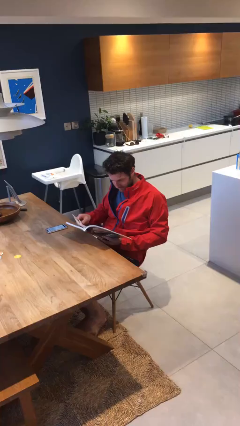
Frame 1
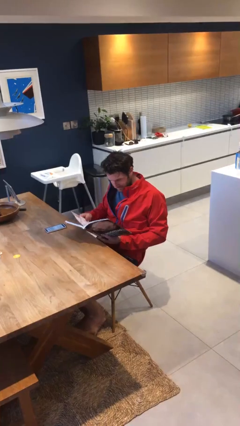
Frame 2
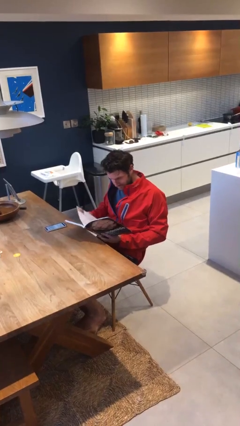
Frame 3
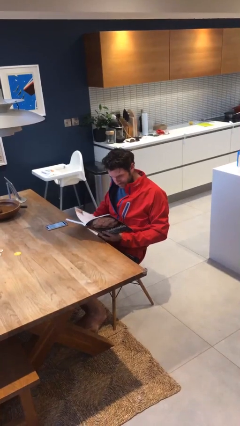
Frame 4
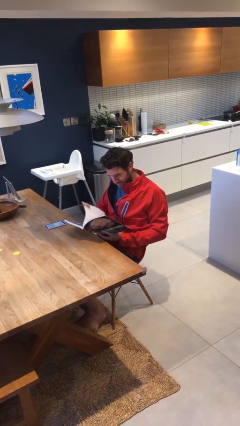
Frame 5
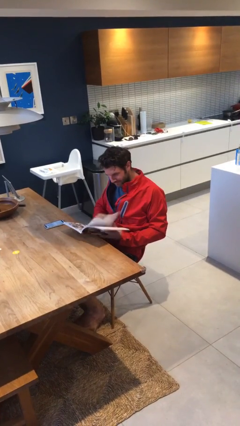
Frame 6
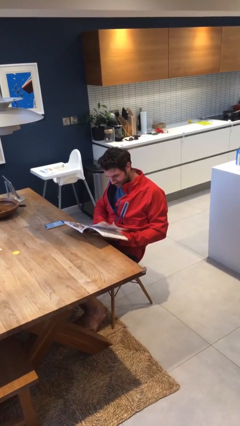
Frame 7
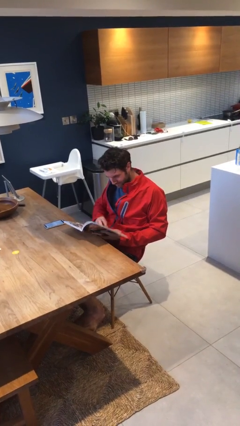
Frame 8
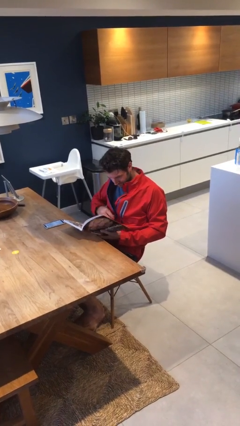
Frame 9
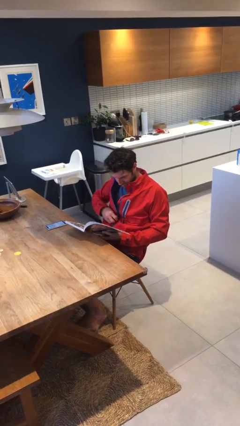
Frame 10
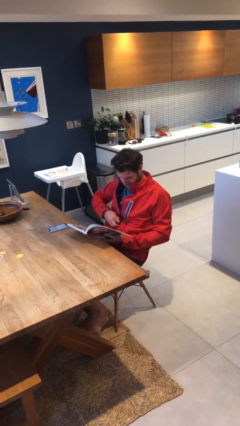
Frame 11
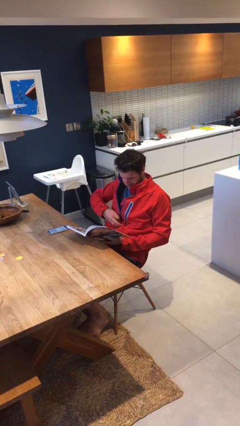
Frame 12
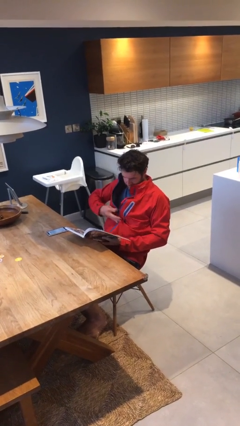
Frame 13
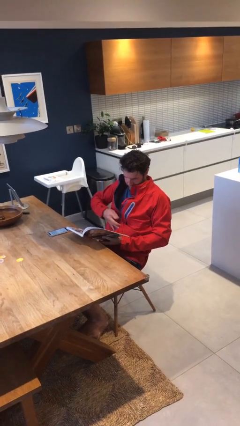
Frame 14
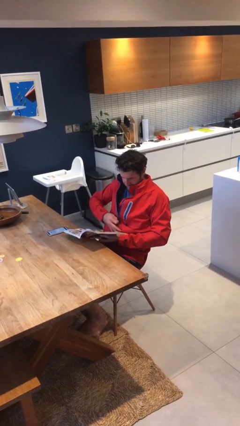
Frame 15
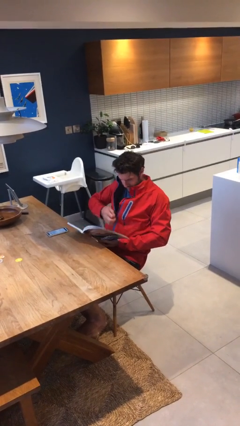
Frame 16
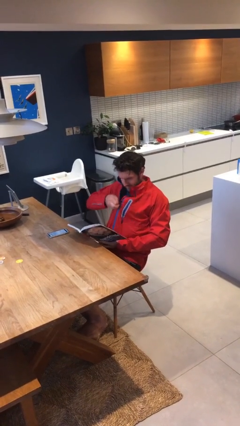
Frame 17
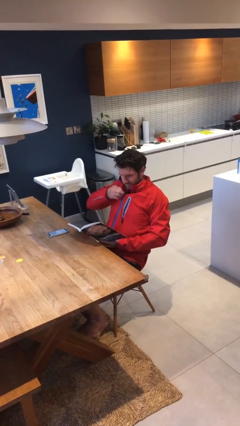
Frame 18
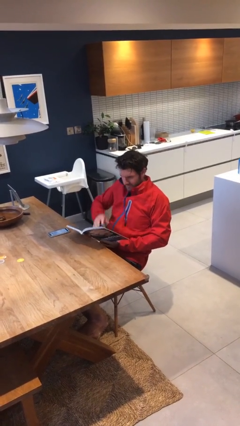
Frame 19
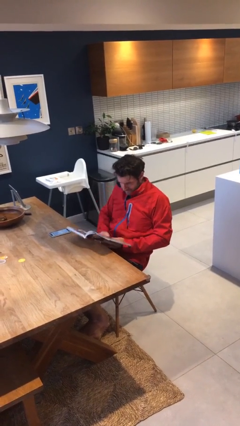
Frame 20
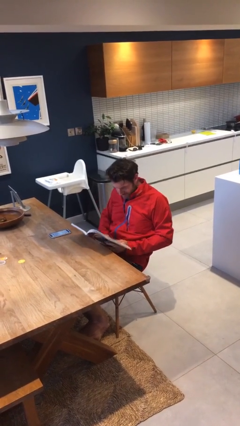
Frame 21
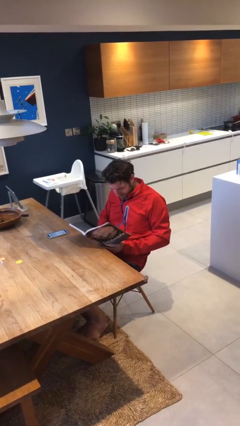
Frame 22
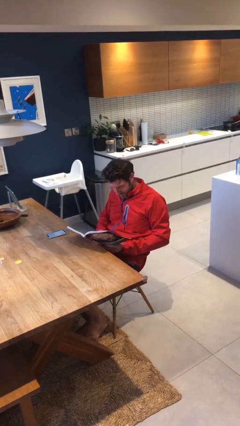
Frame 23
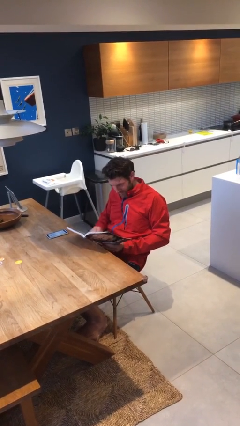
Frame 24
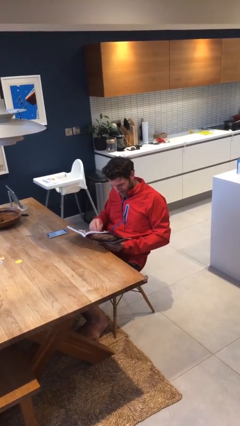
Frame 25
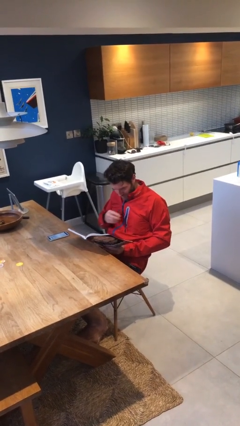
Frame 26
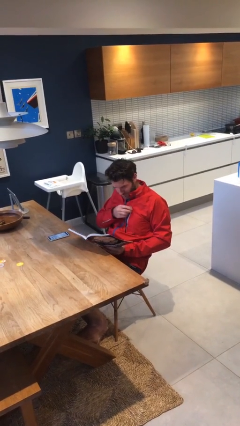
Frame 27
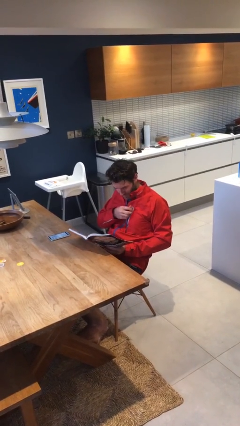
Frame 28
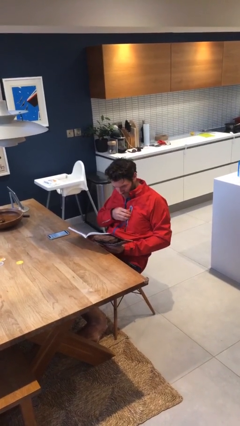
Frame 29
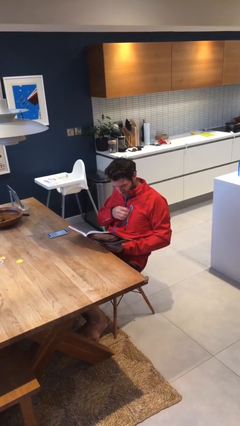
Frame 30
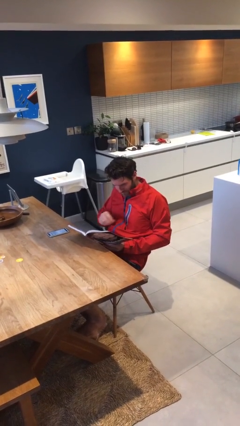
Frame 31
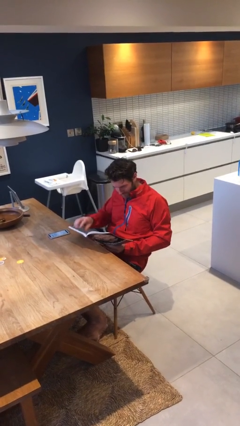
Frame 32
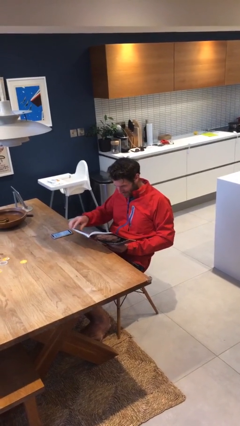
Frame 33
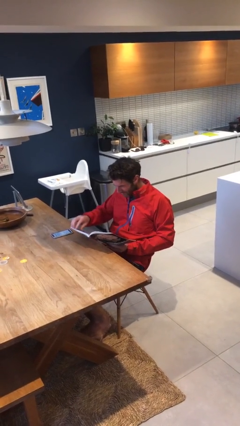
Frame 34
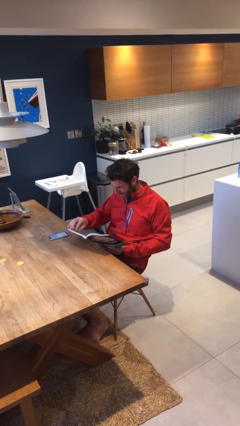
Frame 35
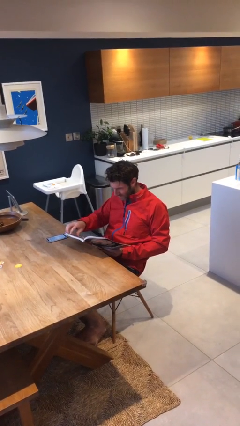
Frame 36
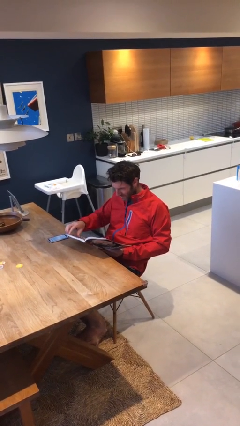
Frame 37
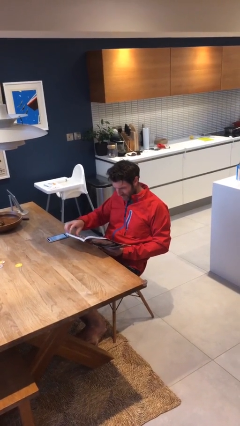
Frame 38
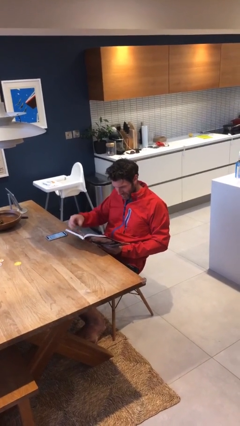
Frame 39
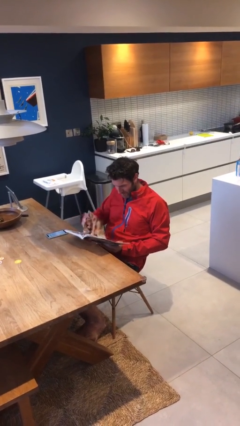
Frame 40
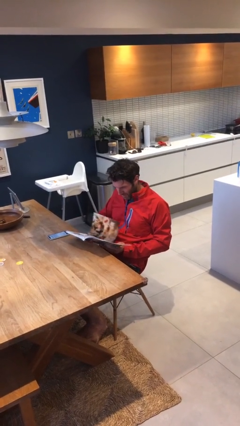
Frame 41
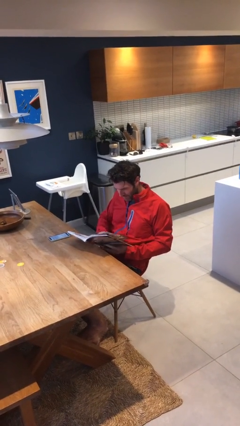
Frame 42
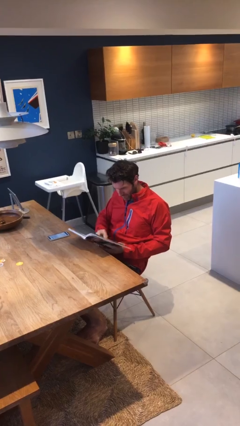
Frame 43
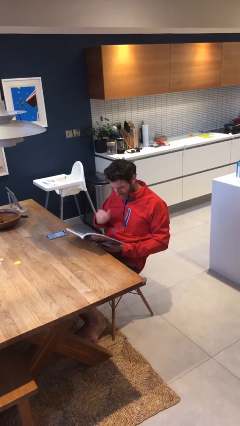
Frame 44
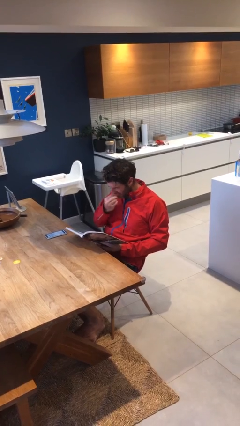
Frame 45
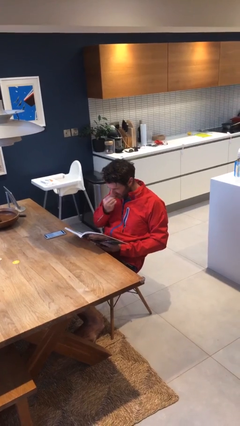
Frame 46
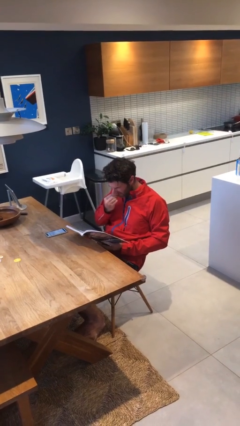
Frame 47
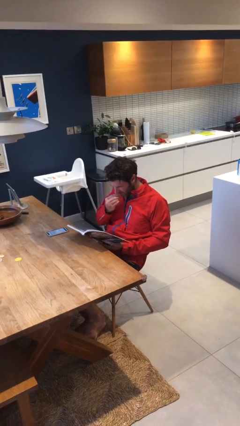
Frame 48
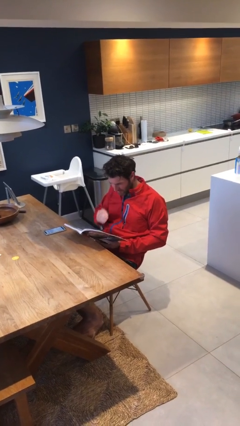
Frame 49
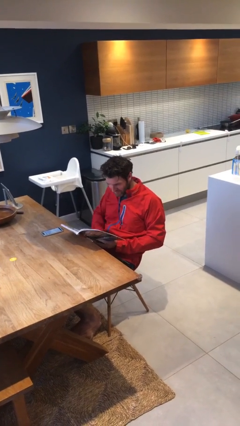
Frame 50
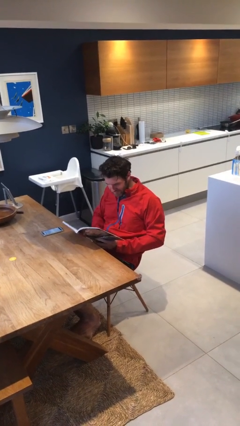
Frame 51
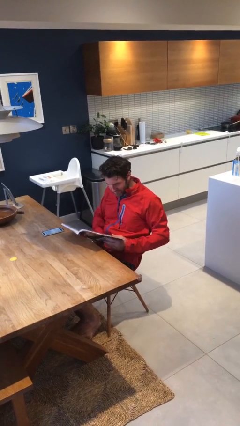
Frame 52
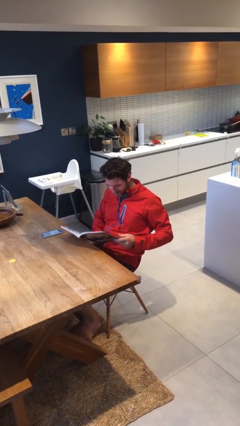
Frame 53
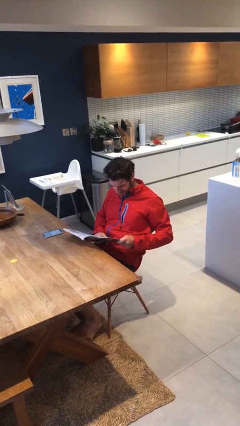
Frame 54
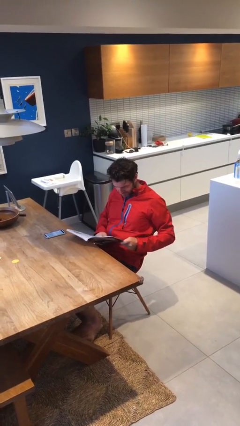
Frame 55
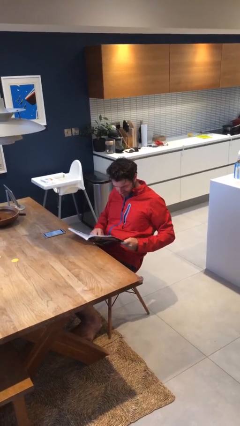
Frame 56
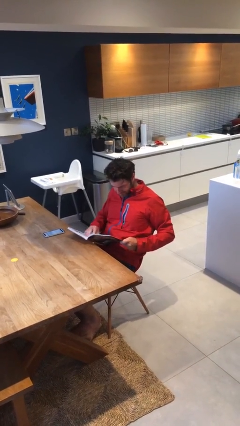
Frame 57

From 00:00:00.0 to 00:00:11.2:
person reads document

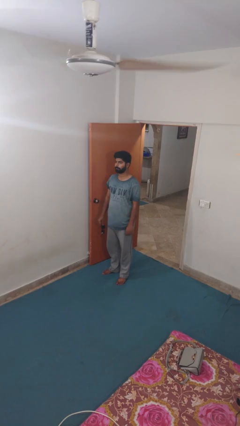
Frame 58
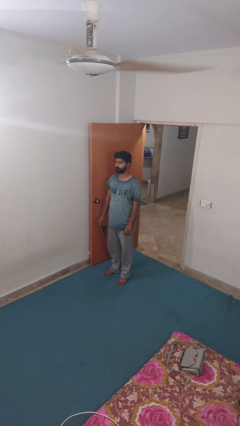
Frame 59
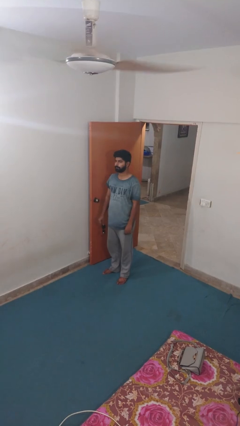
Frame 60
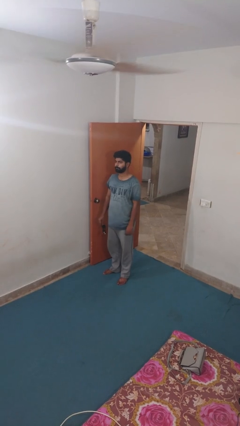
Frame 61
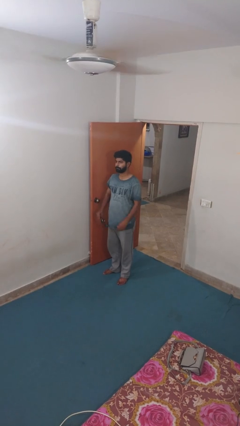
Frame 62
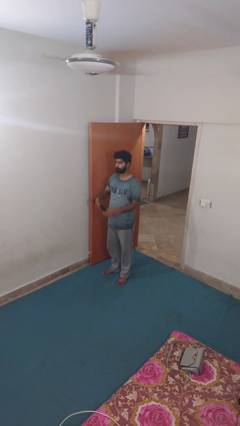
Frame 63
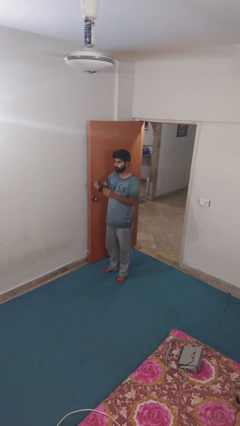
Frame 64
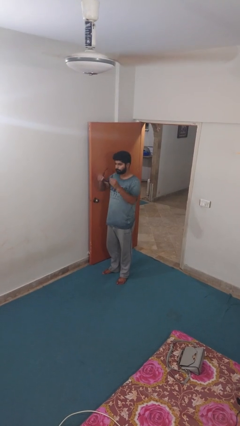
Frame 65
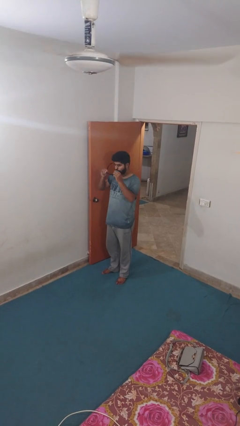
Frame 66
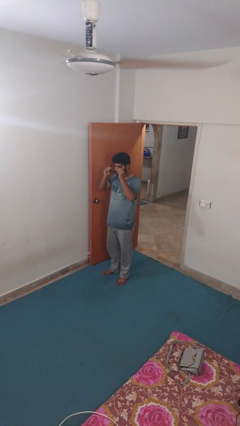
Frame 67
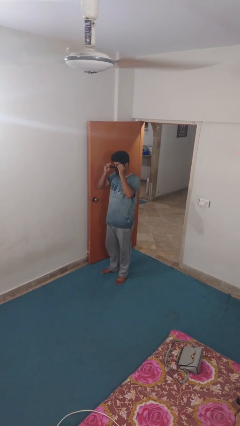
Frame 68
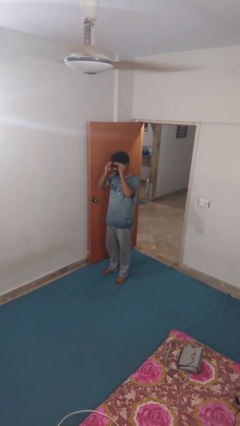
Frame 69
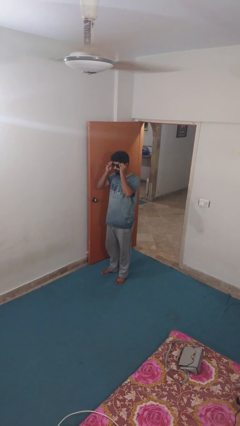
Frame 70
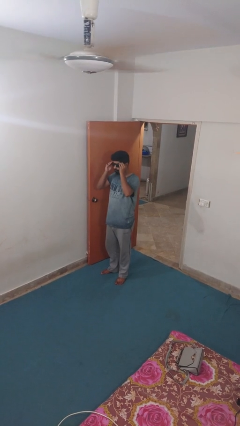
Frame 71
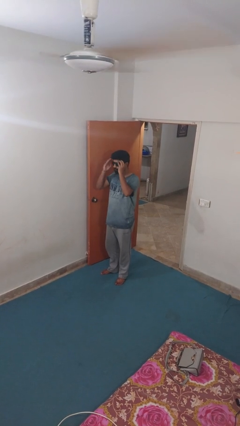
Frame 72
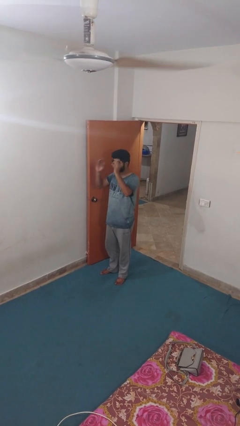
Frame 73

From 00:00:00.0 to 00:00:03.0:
person puts on sunglasses

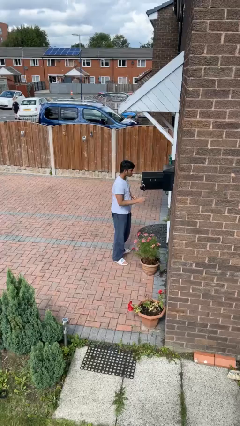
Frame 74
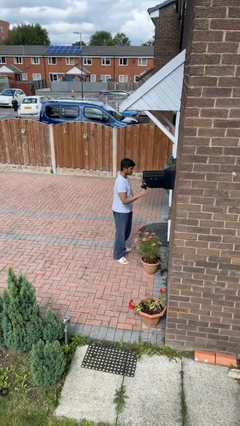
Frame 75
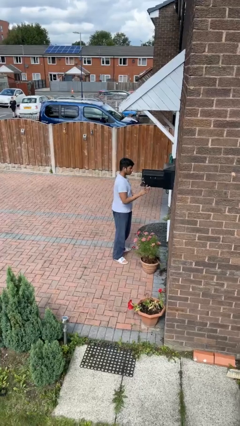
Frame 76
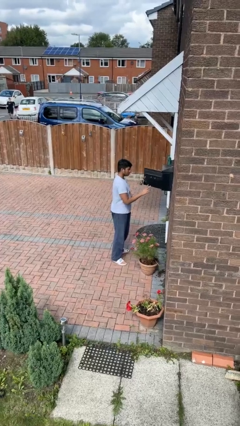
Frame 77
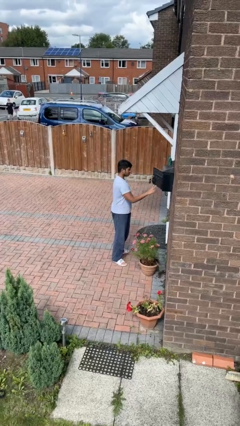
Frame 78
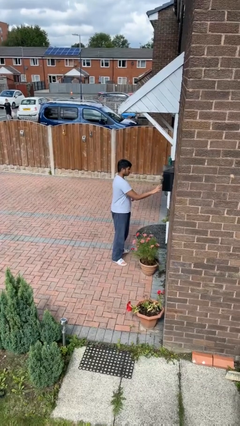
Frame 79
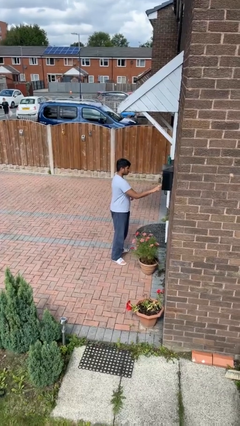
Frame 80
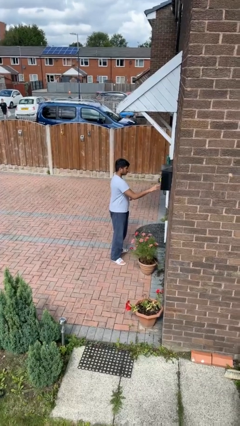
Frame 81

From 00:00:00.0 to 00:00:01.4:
person closes mailbox

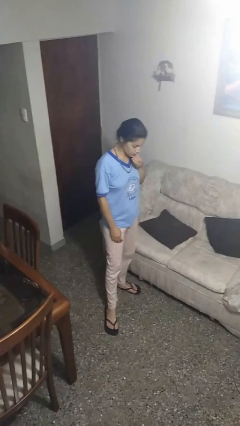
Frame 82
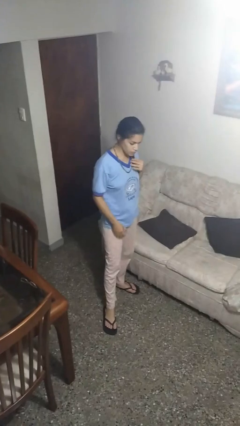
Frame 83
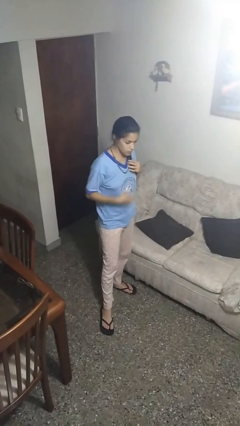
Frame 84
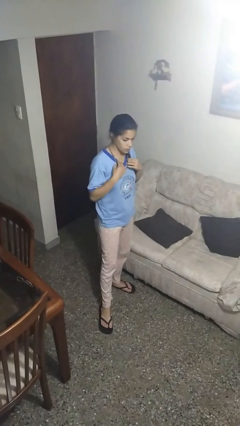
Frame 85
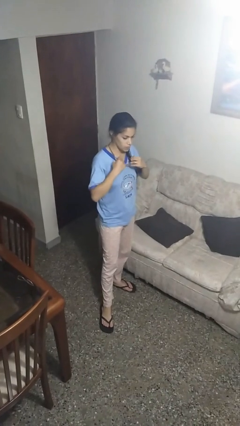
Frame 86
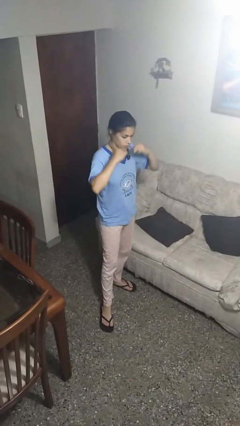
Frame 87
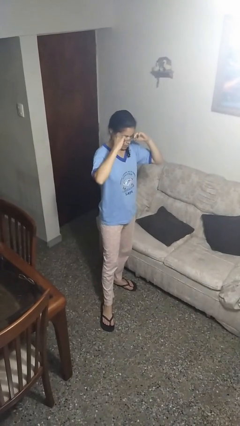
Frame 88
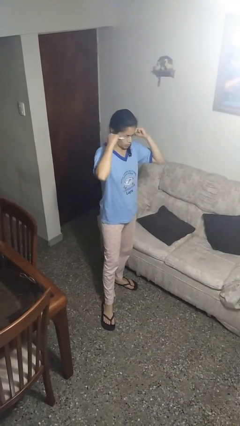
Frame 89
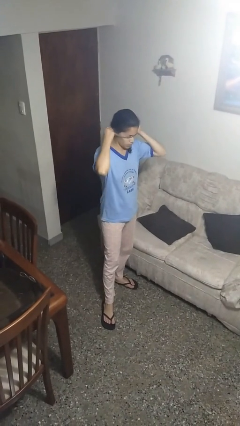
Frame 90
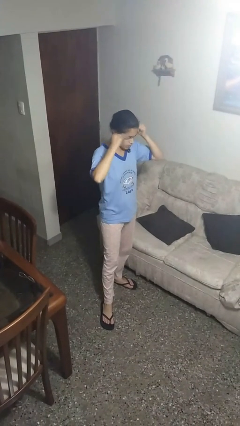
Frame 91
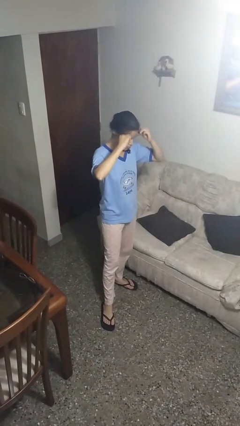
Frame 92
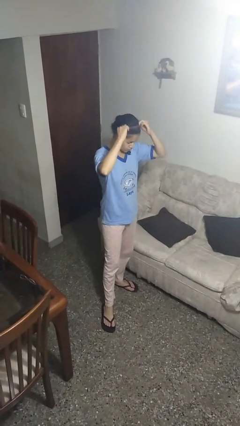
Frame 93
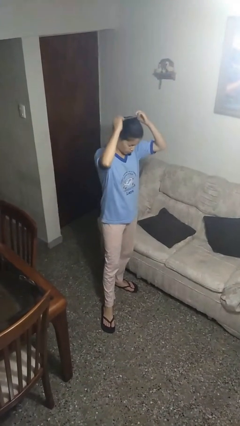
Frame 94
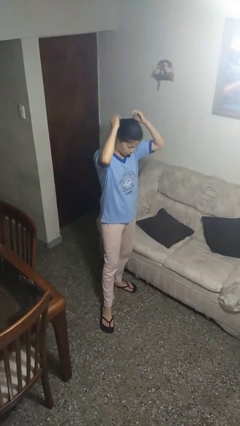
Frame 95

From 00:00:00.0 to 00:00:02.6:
person takes off necklace
